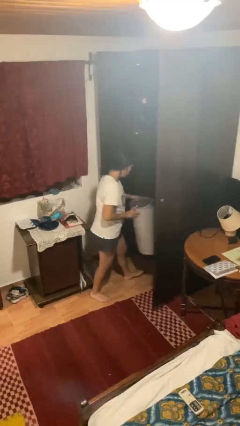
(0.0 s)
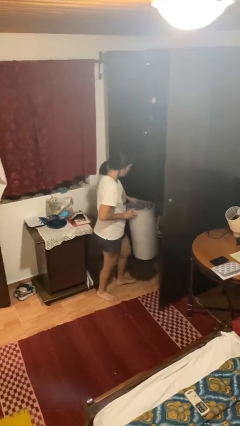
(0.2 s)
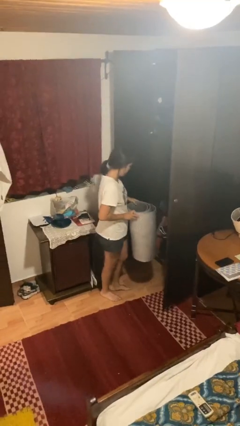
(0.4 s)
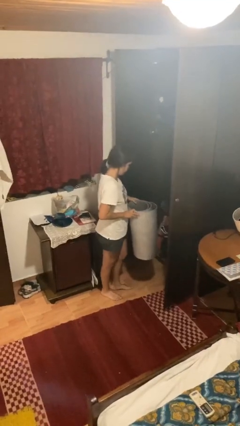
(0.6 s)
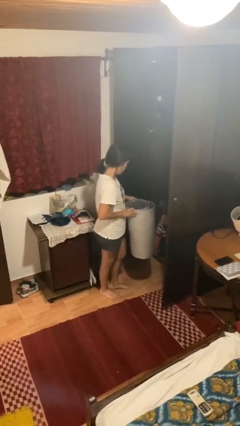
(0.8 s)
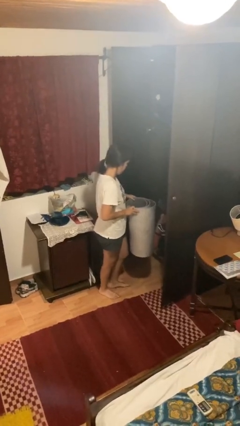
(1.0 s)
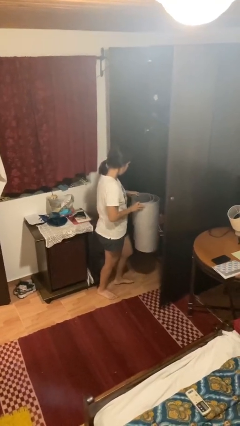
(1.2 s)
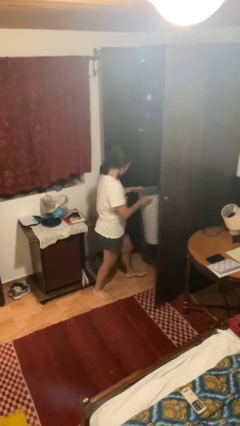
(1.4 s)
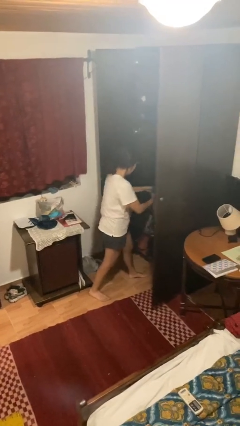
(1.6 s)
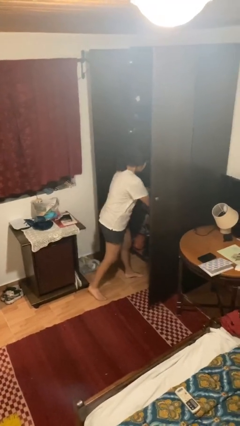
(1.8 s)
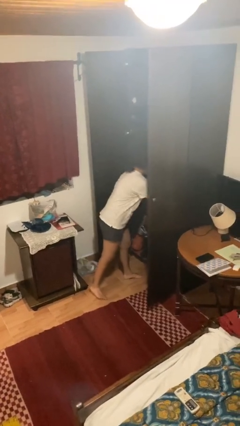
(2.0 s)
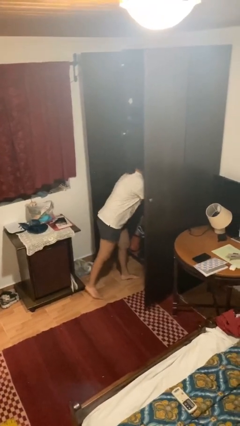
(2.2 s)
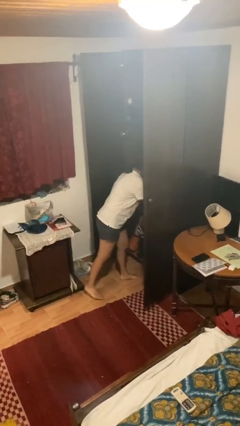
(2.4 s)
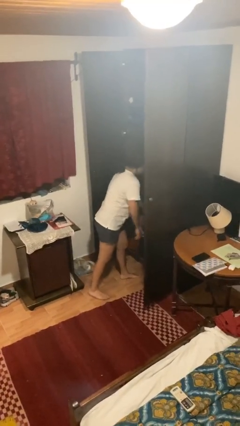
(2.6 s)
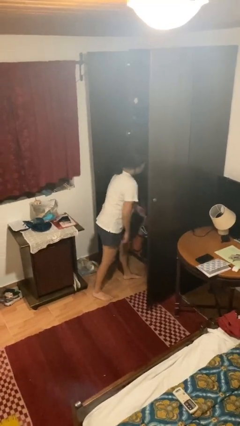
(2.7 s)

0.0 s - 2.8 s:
person puts down object into cabinet

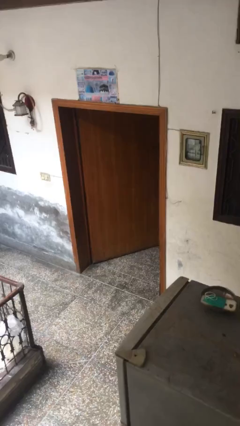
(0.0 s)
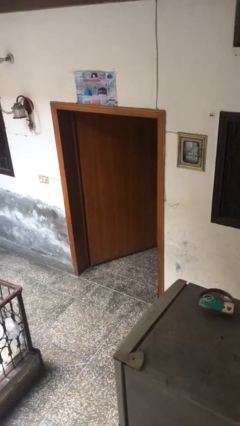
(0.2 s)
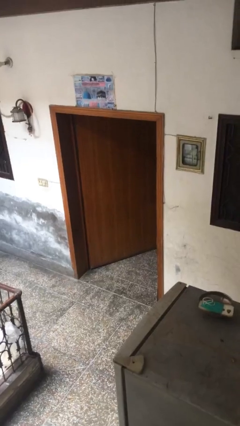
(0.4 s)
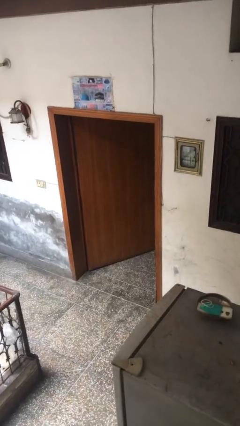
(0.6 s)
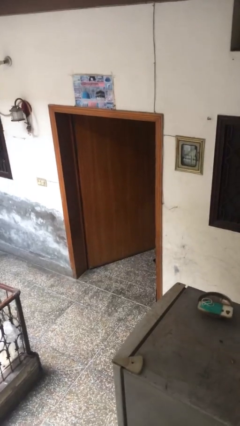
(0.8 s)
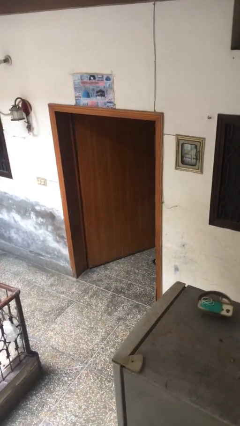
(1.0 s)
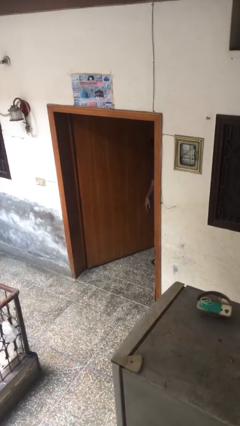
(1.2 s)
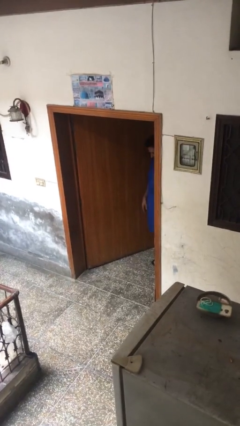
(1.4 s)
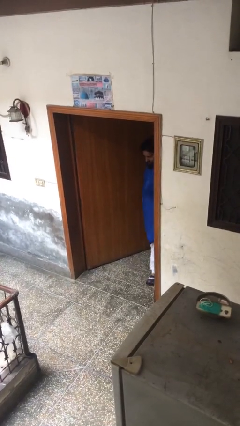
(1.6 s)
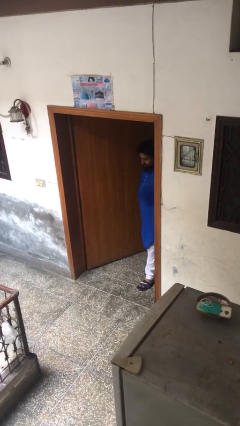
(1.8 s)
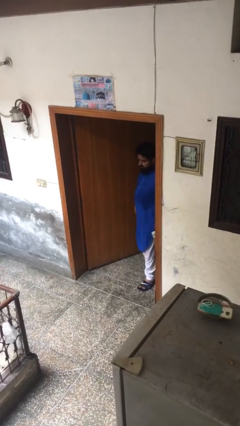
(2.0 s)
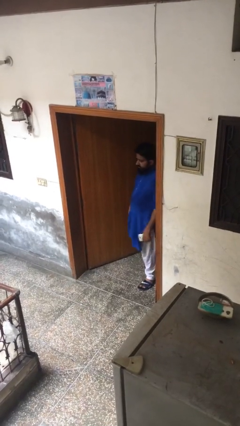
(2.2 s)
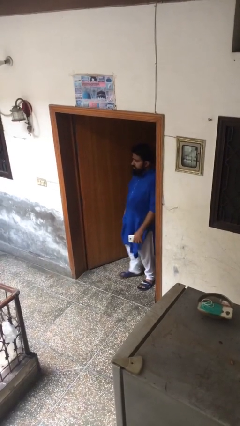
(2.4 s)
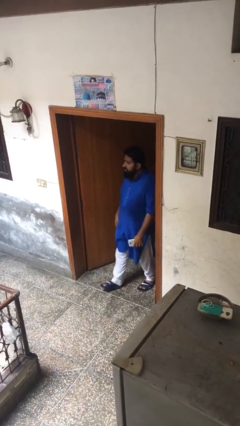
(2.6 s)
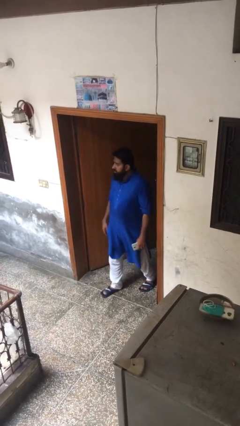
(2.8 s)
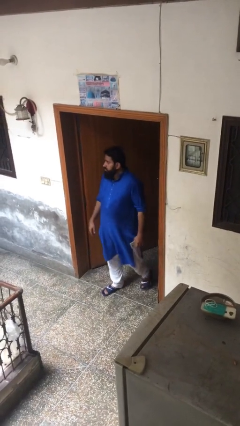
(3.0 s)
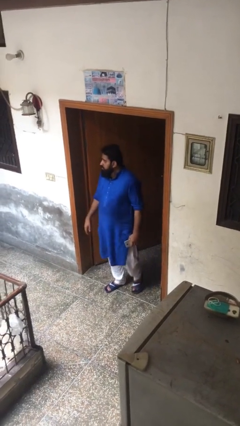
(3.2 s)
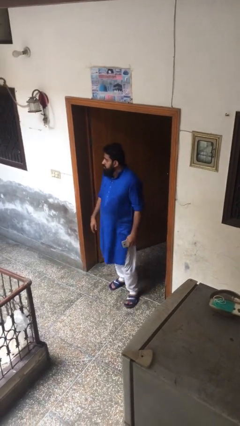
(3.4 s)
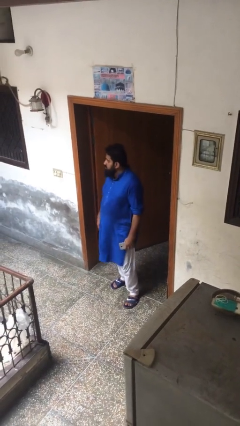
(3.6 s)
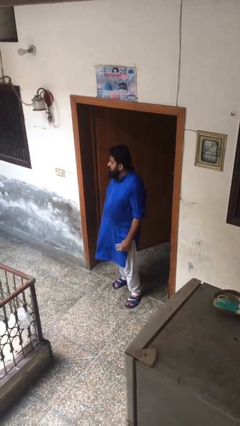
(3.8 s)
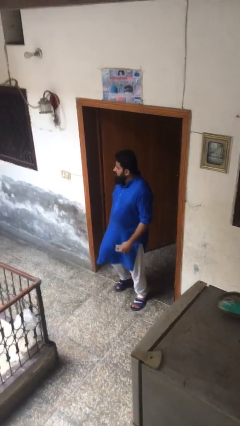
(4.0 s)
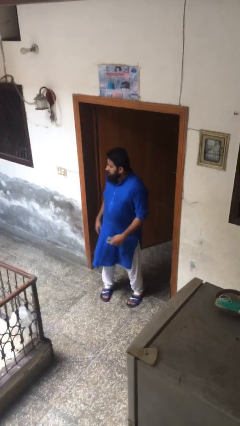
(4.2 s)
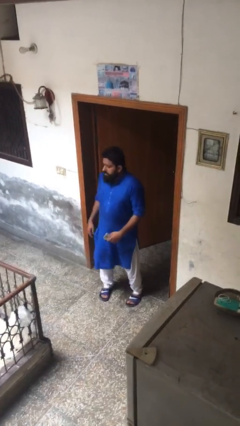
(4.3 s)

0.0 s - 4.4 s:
person enters scene through structure

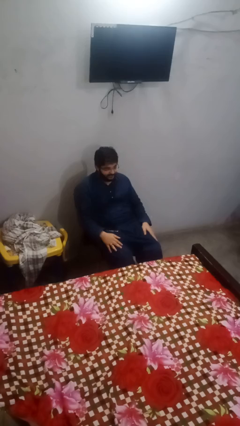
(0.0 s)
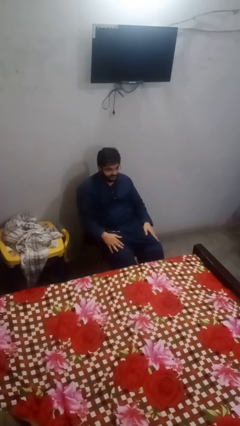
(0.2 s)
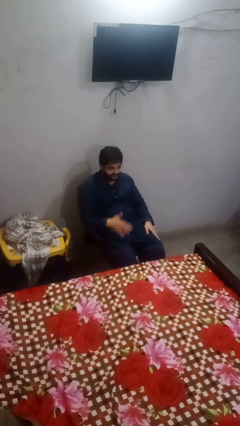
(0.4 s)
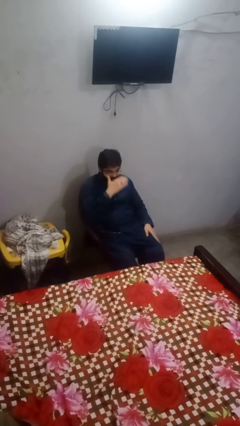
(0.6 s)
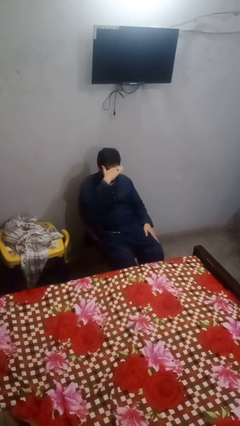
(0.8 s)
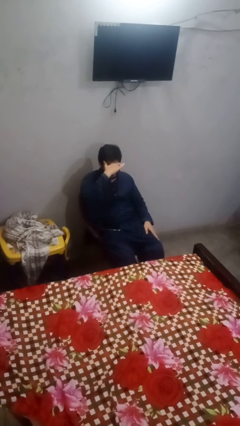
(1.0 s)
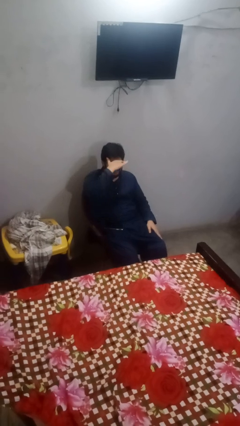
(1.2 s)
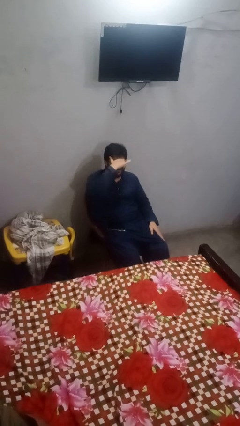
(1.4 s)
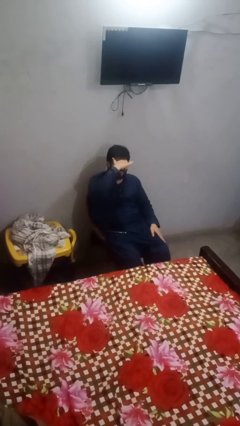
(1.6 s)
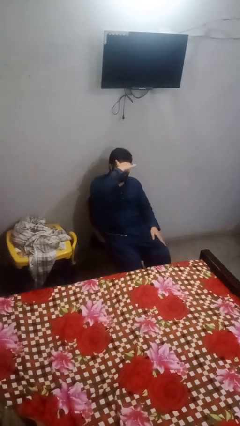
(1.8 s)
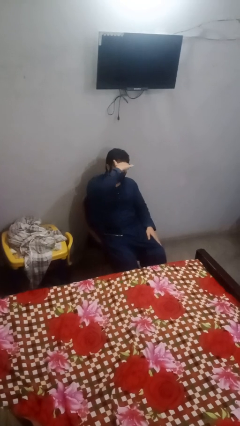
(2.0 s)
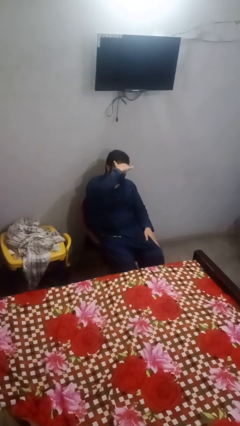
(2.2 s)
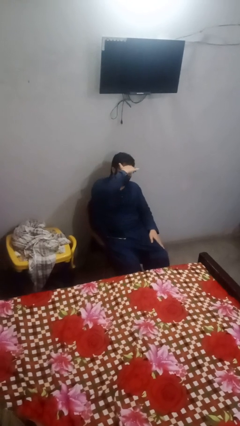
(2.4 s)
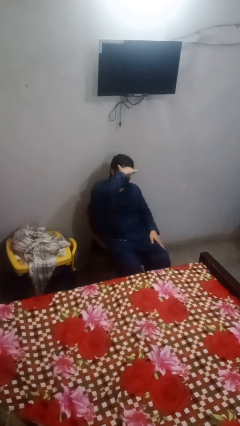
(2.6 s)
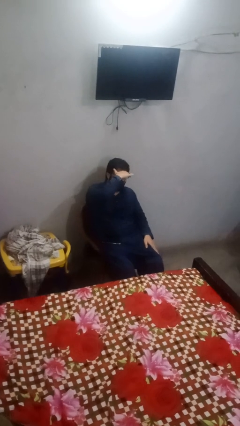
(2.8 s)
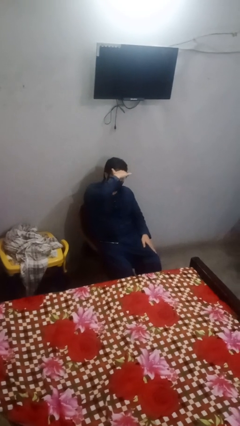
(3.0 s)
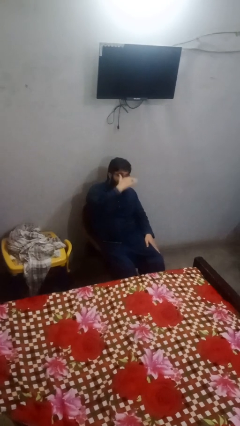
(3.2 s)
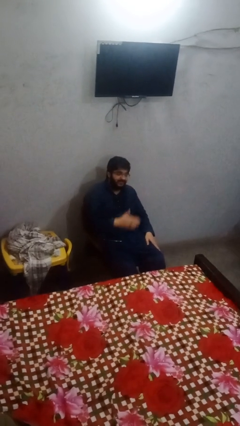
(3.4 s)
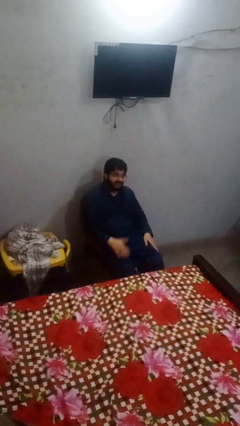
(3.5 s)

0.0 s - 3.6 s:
person shades eyes

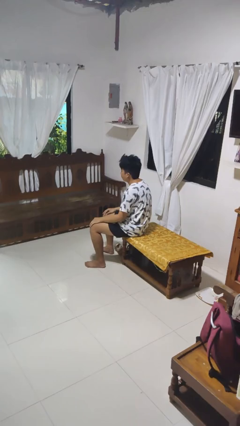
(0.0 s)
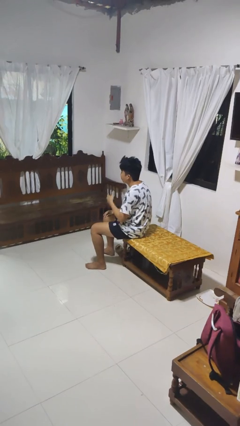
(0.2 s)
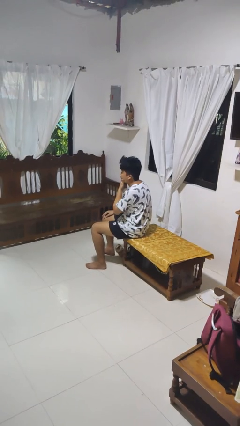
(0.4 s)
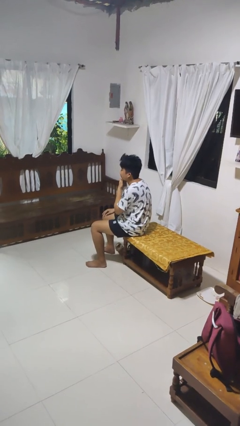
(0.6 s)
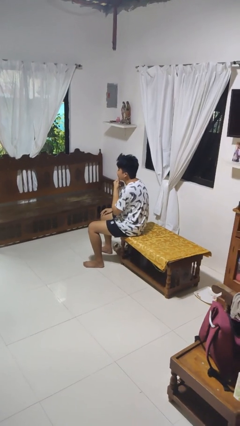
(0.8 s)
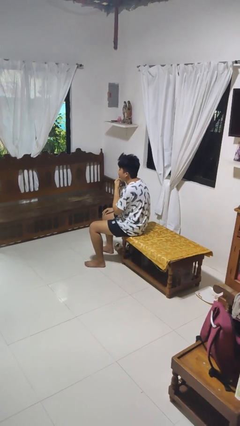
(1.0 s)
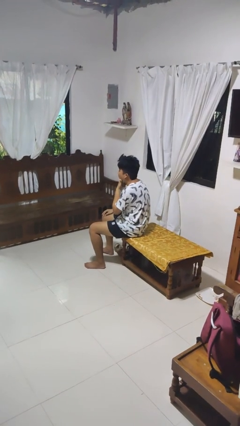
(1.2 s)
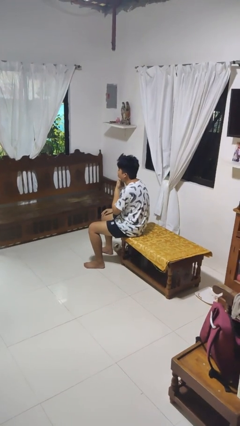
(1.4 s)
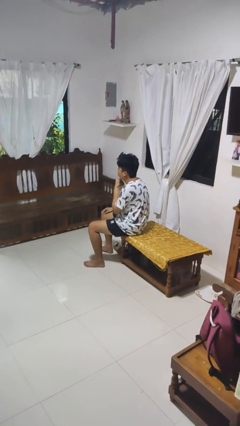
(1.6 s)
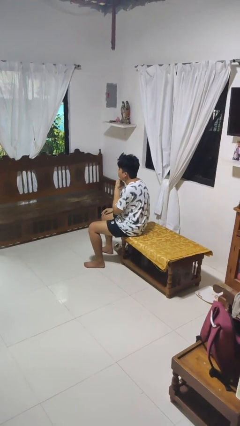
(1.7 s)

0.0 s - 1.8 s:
person strokes chin

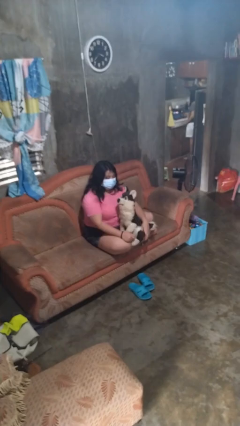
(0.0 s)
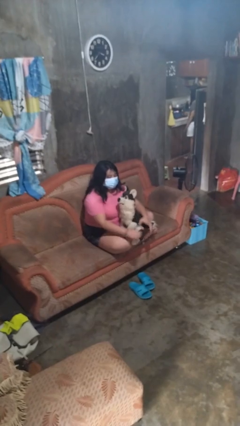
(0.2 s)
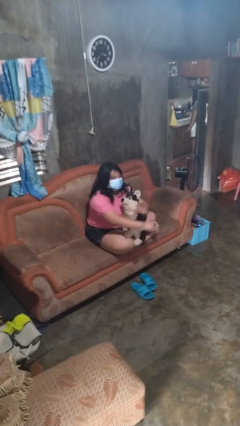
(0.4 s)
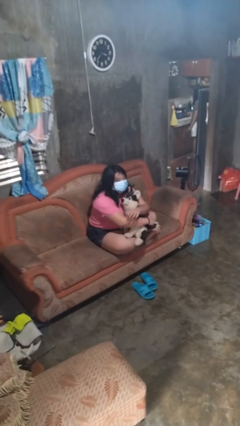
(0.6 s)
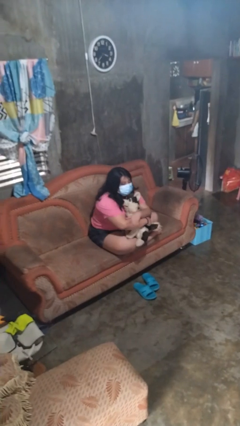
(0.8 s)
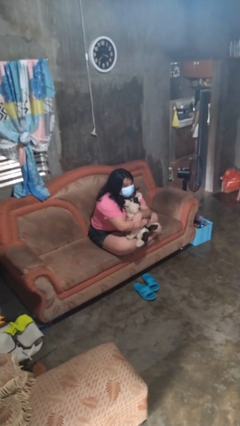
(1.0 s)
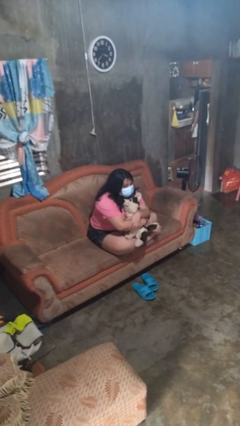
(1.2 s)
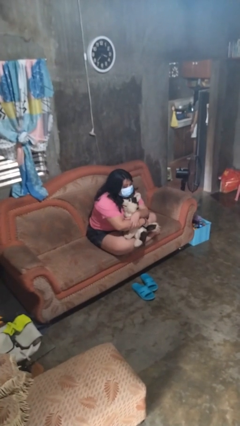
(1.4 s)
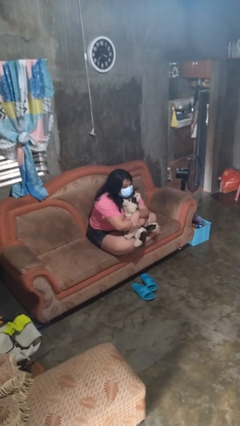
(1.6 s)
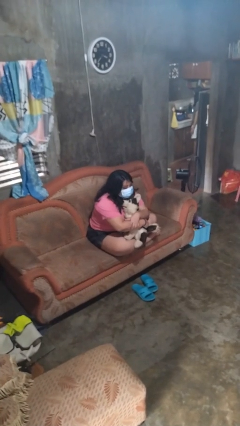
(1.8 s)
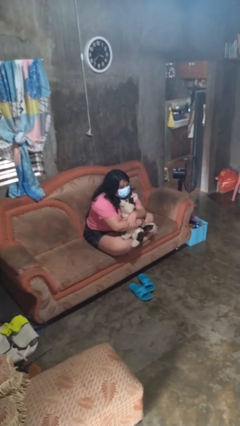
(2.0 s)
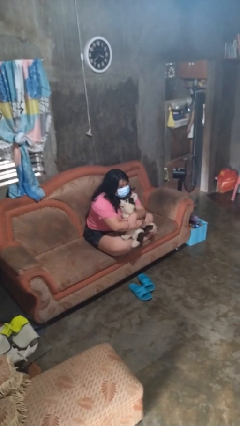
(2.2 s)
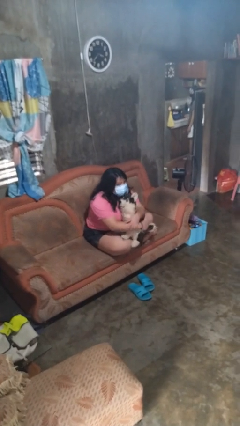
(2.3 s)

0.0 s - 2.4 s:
person hugs stuffed animal

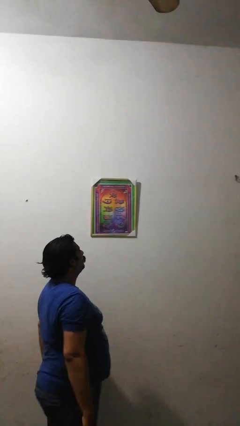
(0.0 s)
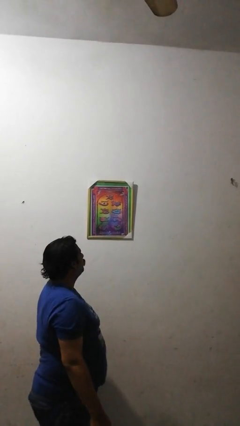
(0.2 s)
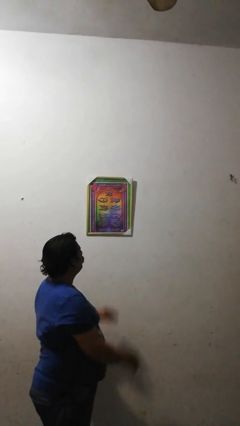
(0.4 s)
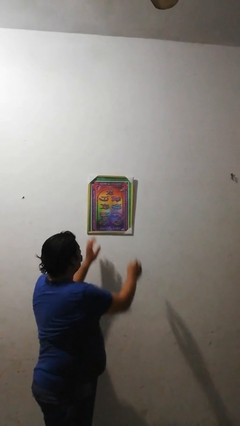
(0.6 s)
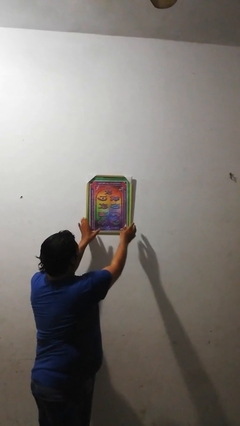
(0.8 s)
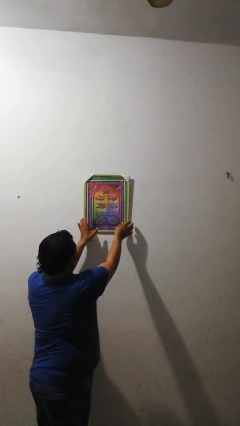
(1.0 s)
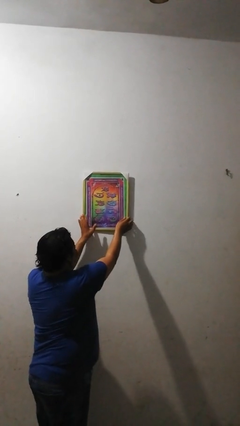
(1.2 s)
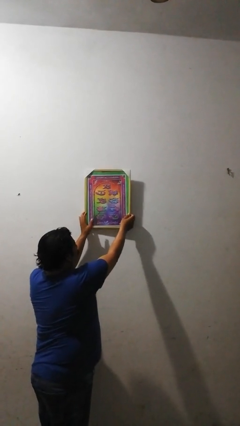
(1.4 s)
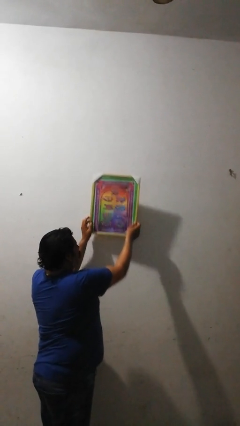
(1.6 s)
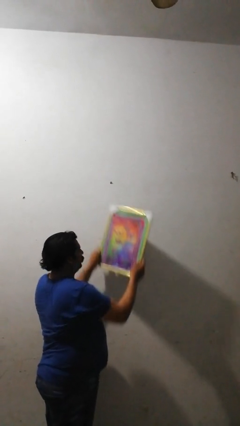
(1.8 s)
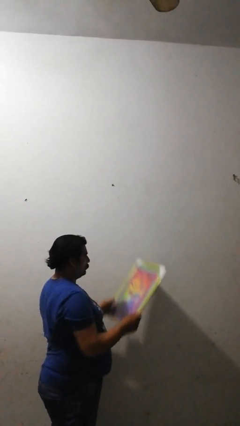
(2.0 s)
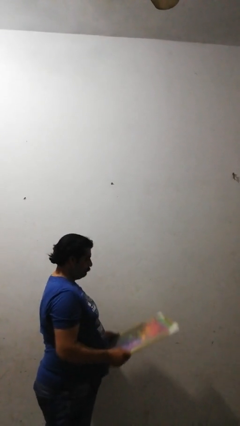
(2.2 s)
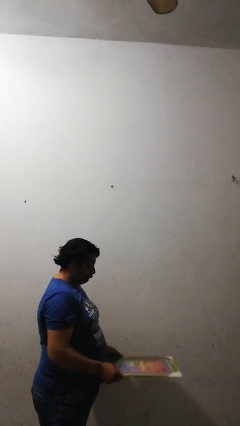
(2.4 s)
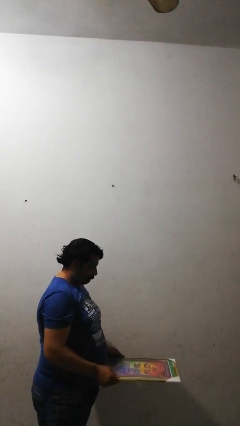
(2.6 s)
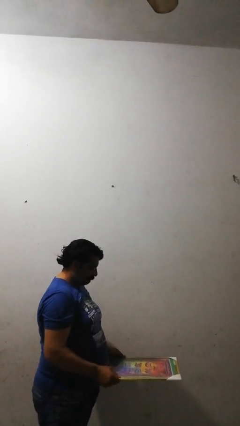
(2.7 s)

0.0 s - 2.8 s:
person takes down picture frame
